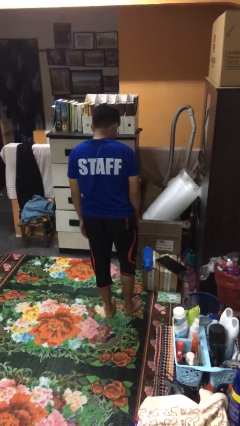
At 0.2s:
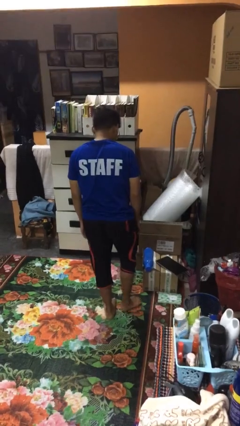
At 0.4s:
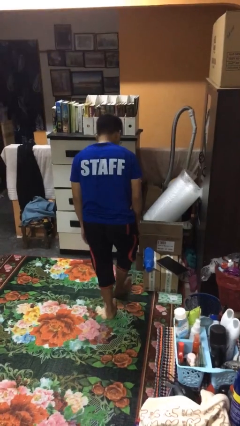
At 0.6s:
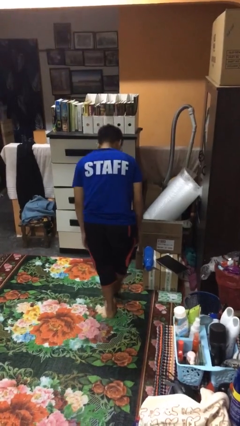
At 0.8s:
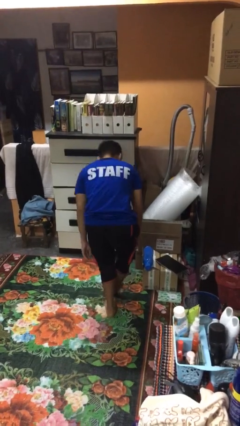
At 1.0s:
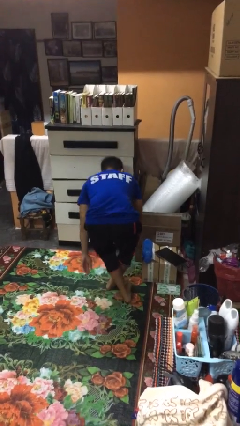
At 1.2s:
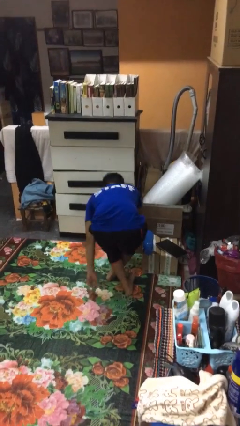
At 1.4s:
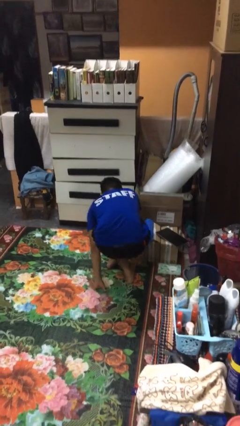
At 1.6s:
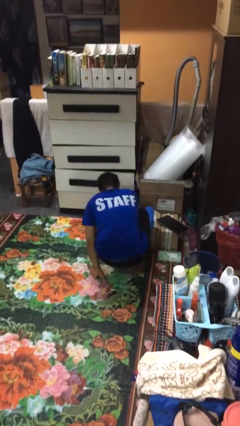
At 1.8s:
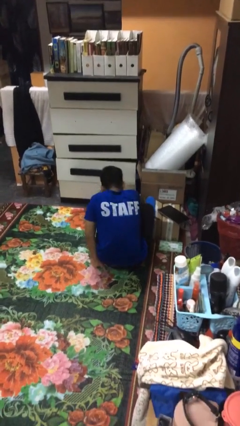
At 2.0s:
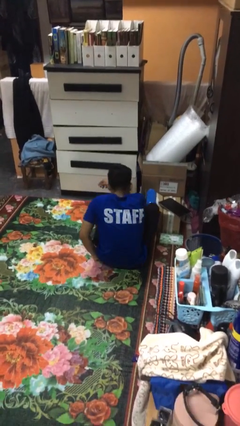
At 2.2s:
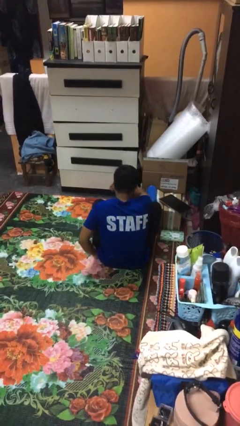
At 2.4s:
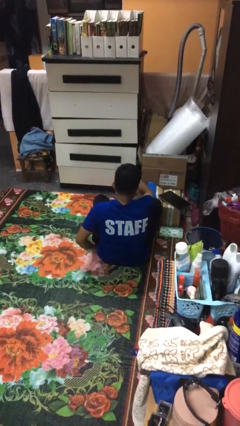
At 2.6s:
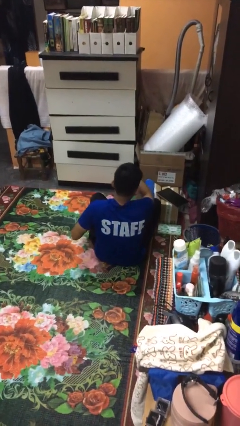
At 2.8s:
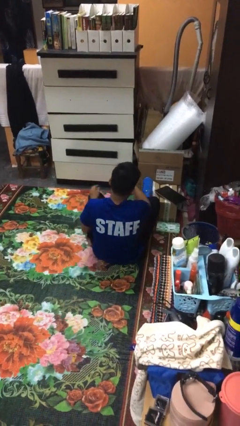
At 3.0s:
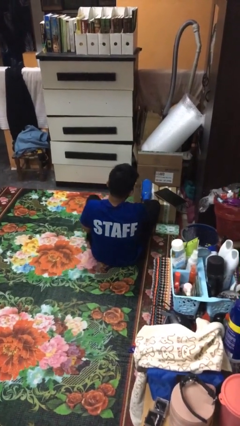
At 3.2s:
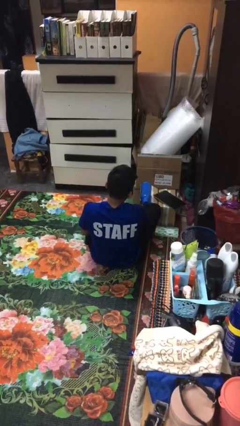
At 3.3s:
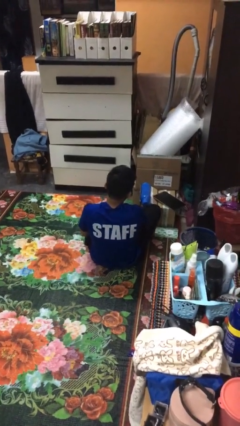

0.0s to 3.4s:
person sits crisscross

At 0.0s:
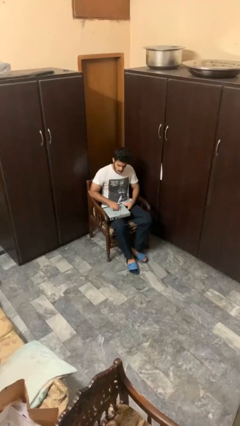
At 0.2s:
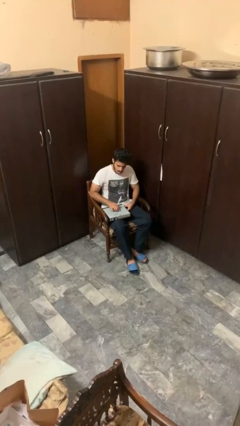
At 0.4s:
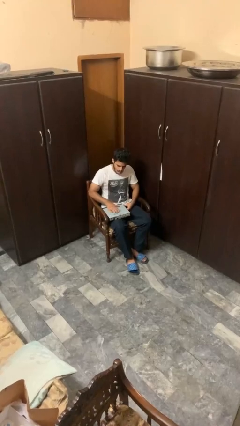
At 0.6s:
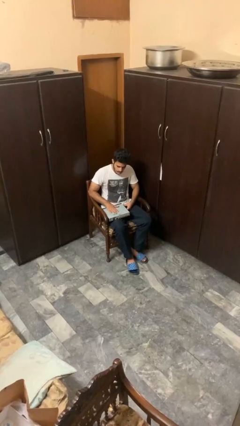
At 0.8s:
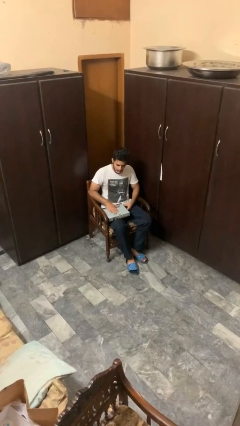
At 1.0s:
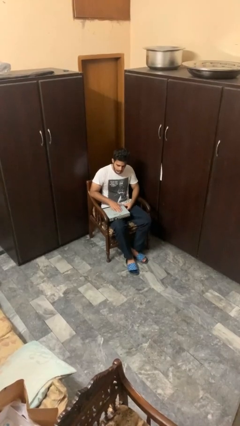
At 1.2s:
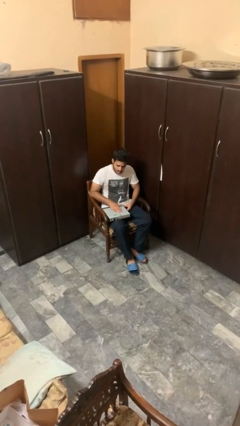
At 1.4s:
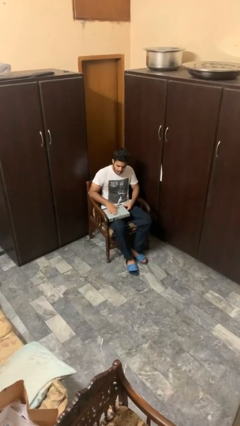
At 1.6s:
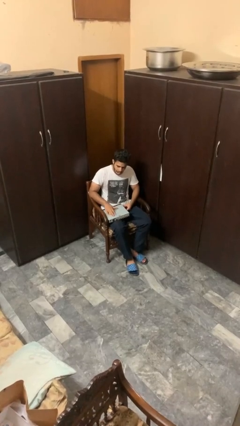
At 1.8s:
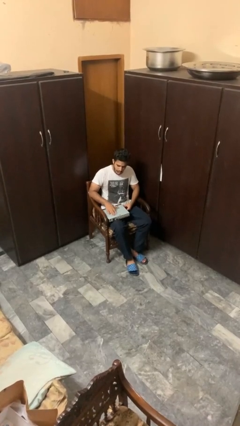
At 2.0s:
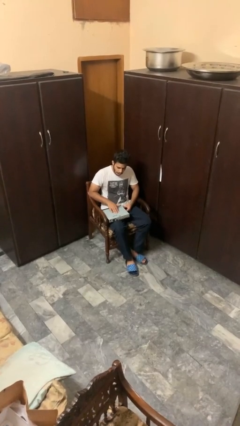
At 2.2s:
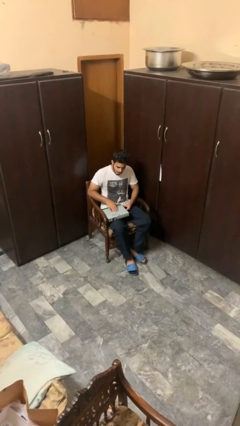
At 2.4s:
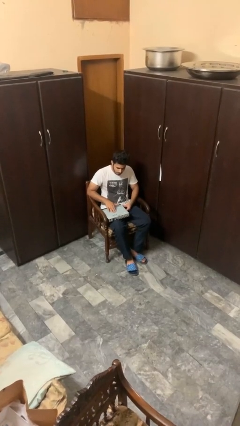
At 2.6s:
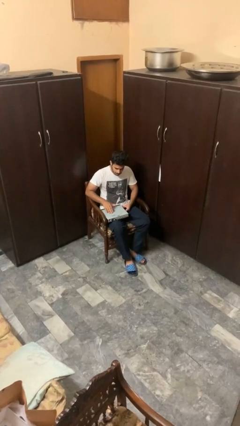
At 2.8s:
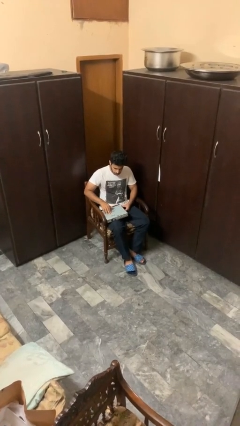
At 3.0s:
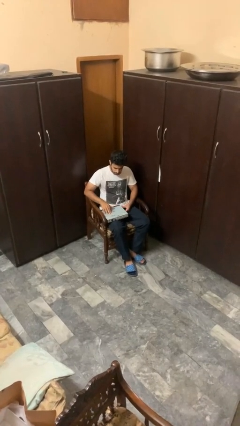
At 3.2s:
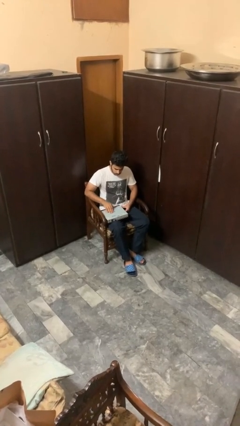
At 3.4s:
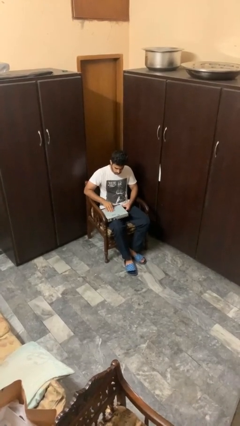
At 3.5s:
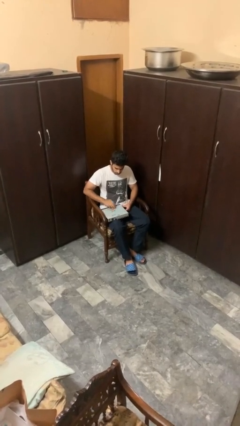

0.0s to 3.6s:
person taps object with finger

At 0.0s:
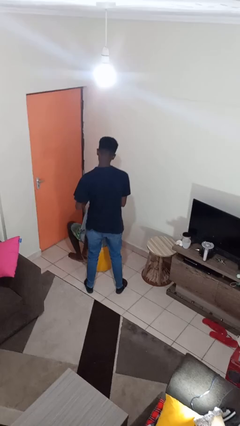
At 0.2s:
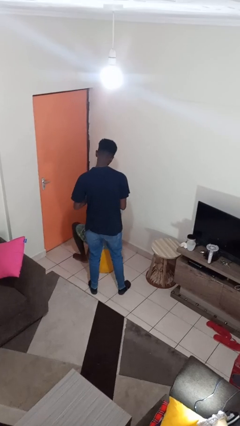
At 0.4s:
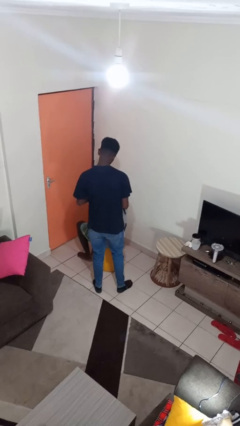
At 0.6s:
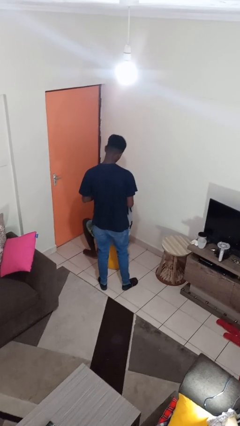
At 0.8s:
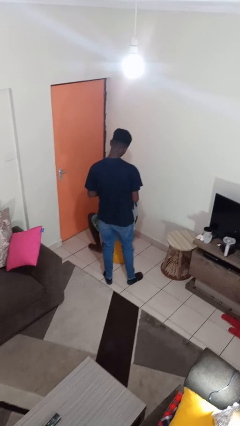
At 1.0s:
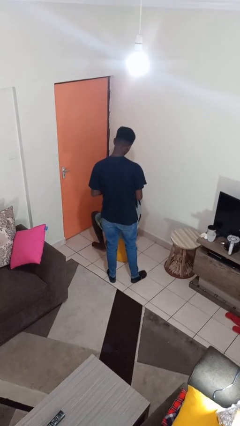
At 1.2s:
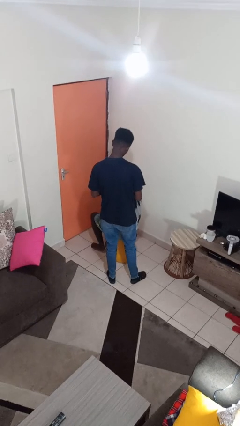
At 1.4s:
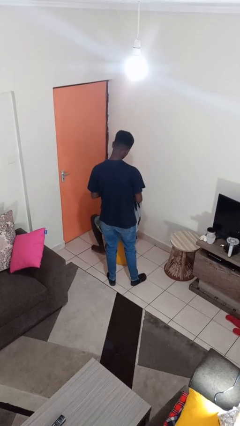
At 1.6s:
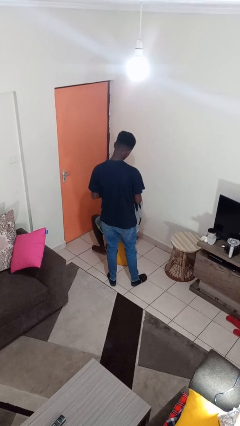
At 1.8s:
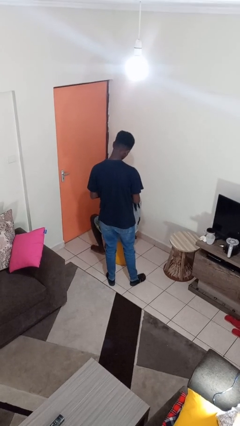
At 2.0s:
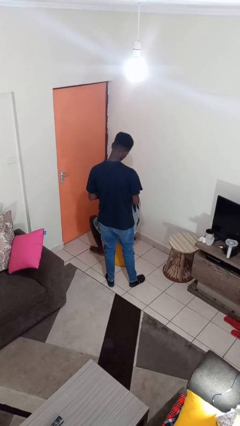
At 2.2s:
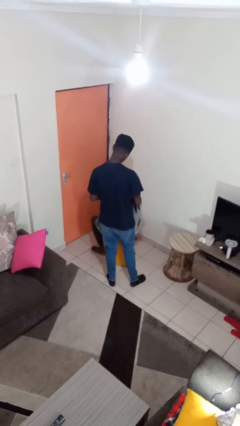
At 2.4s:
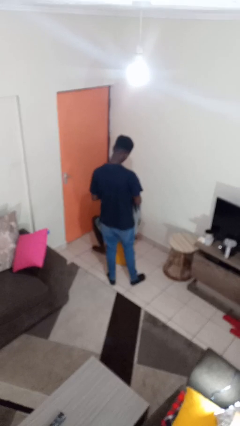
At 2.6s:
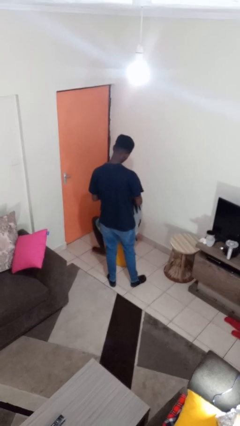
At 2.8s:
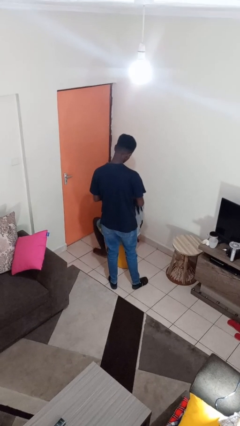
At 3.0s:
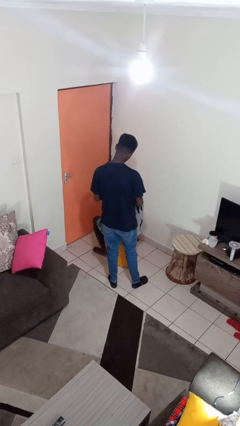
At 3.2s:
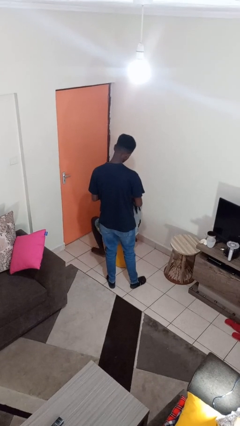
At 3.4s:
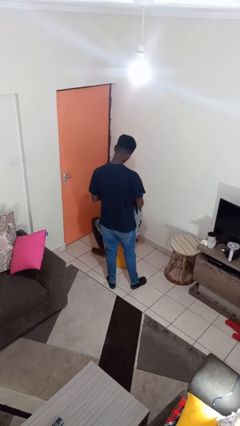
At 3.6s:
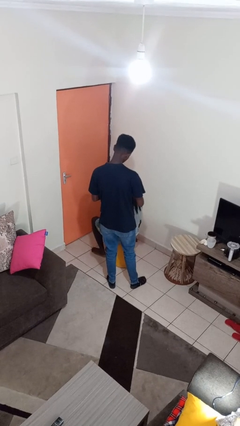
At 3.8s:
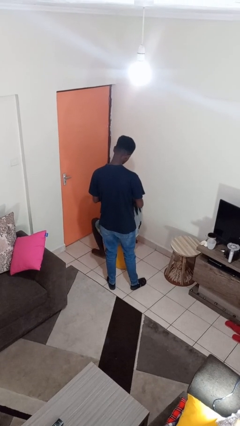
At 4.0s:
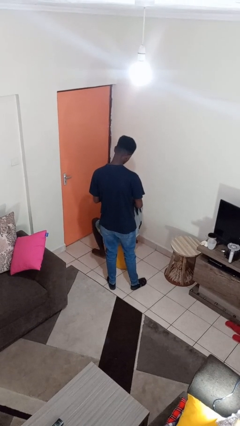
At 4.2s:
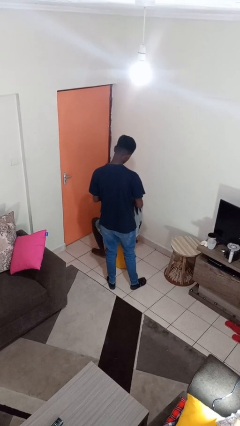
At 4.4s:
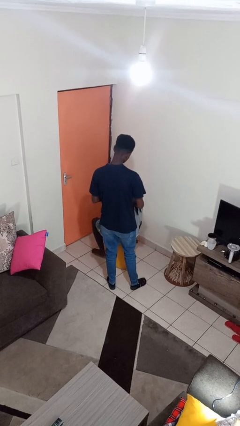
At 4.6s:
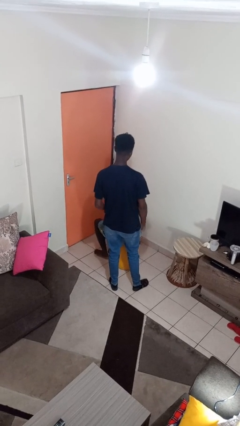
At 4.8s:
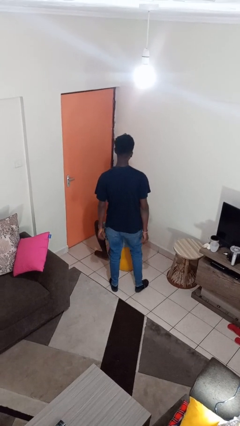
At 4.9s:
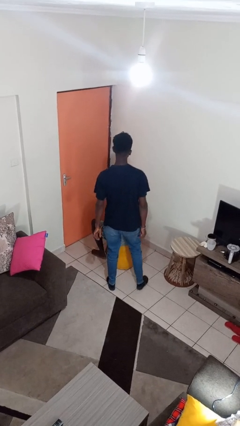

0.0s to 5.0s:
person braids hair of person

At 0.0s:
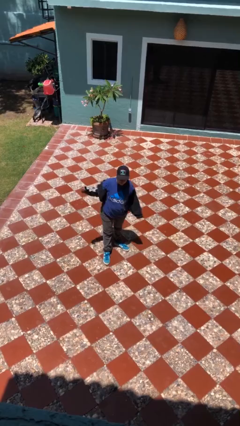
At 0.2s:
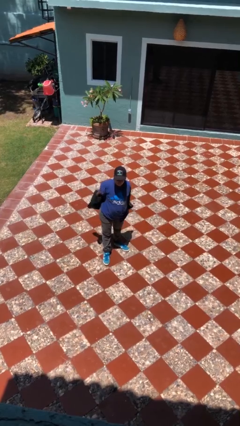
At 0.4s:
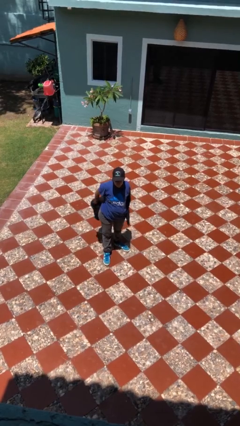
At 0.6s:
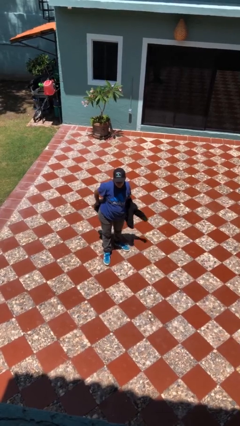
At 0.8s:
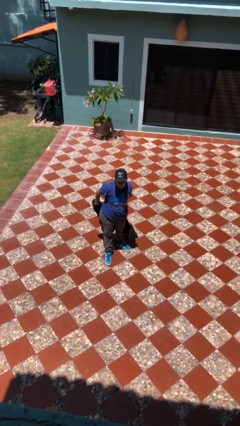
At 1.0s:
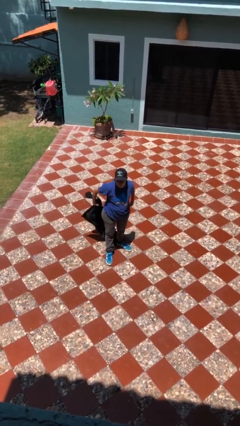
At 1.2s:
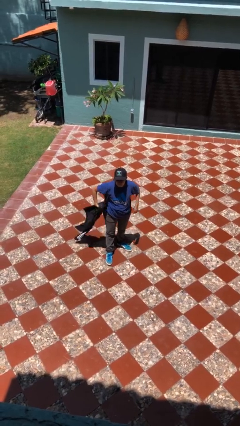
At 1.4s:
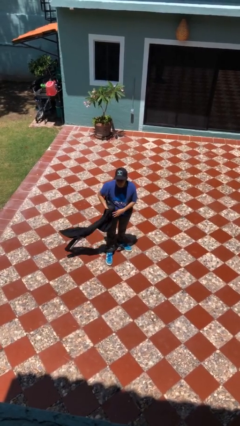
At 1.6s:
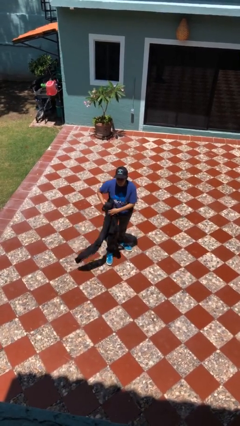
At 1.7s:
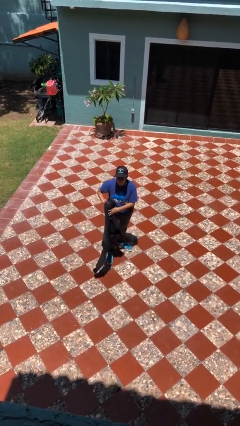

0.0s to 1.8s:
person takes off jacket

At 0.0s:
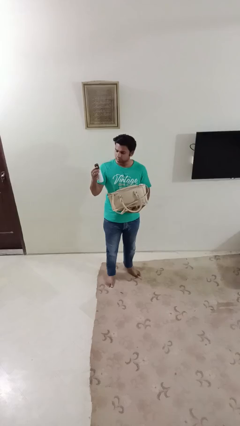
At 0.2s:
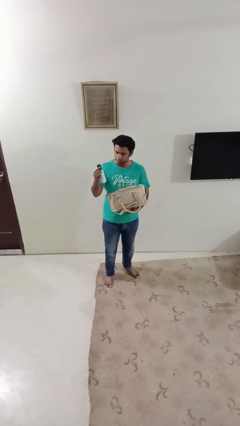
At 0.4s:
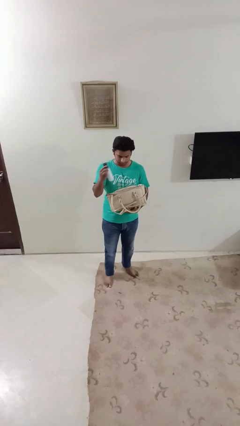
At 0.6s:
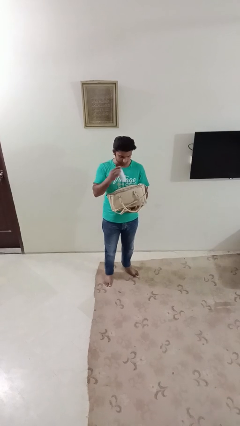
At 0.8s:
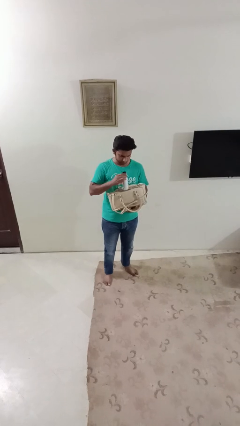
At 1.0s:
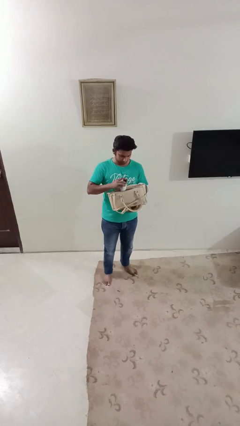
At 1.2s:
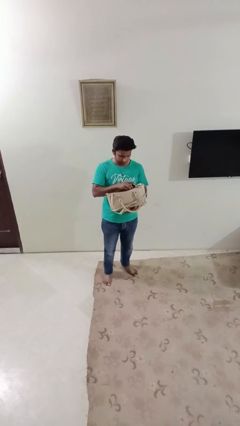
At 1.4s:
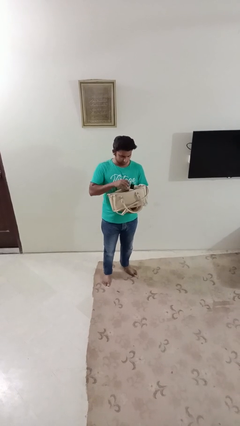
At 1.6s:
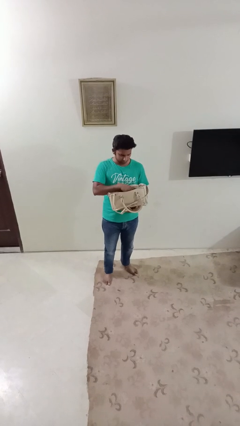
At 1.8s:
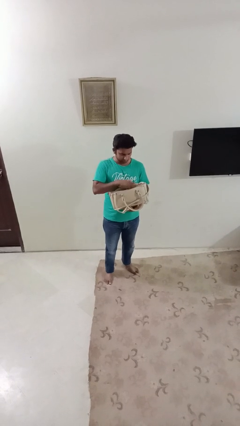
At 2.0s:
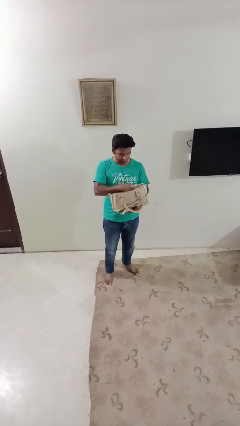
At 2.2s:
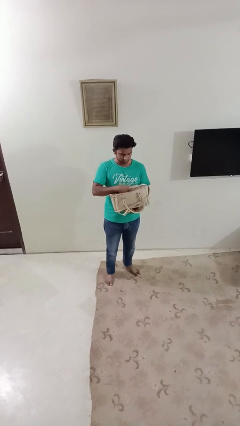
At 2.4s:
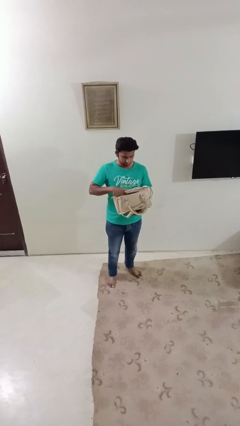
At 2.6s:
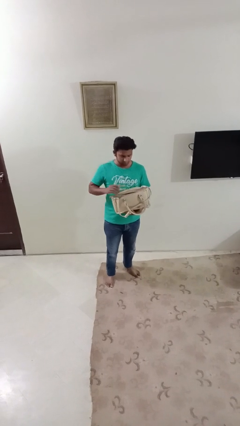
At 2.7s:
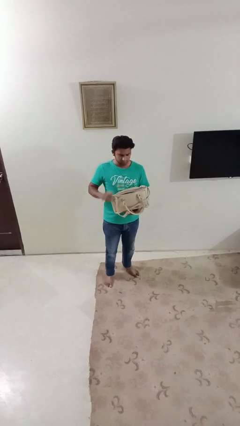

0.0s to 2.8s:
person puts object into purse

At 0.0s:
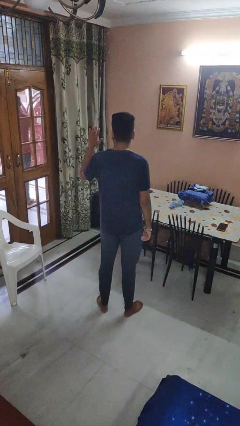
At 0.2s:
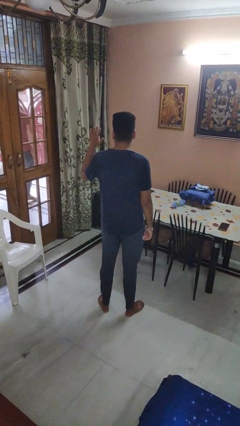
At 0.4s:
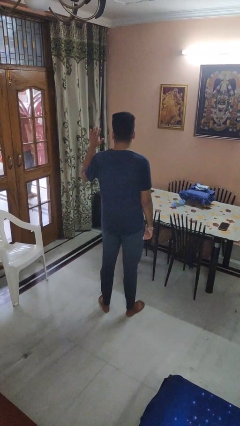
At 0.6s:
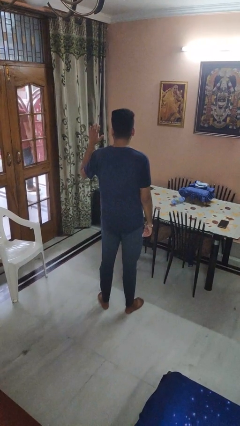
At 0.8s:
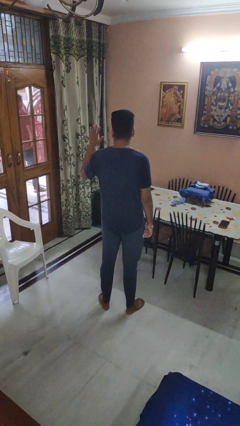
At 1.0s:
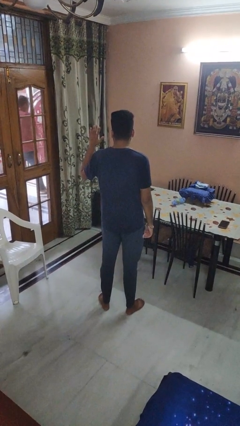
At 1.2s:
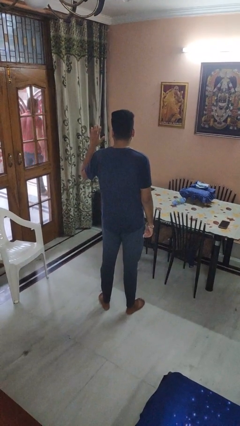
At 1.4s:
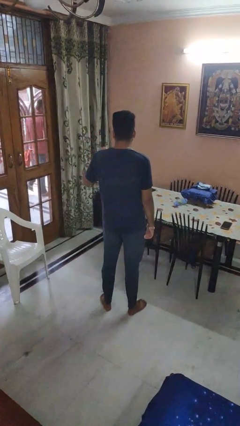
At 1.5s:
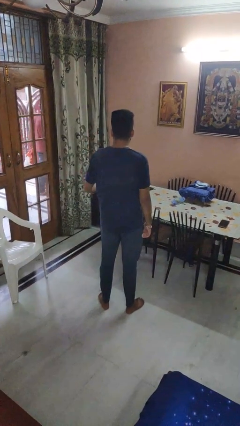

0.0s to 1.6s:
person gestures number five
